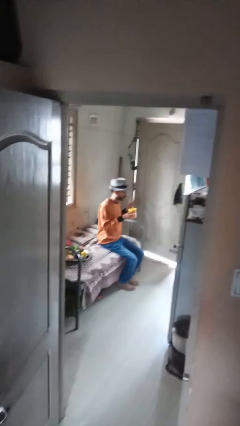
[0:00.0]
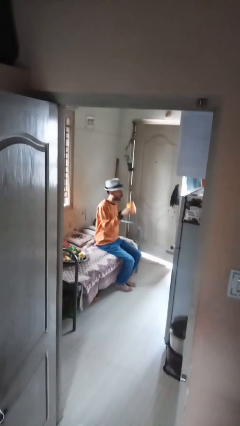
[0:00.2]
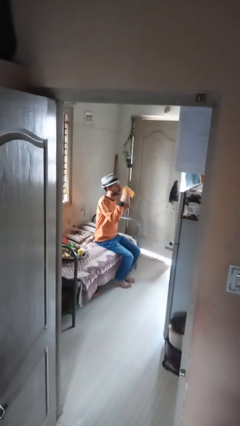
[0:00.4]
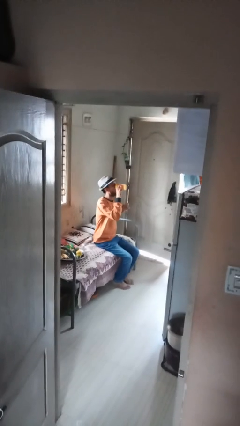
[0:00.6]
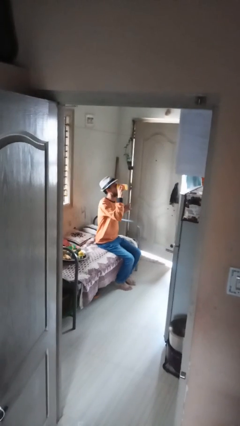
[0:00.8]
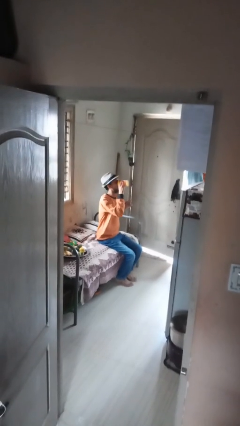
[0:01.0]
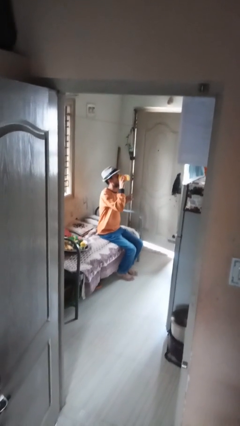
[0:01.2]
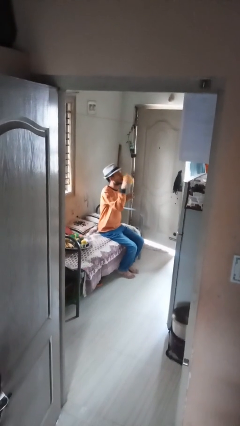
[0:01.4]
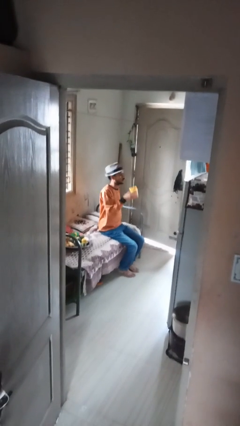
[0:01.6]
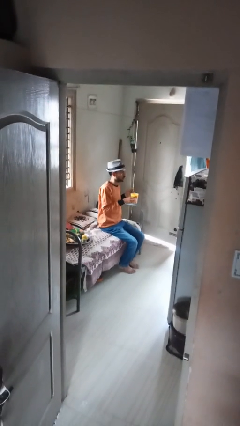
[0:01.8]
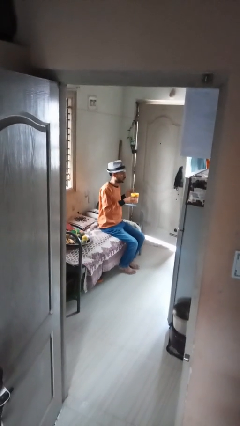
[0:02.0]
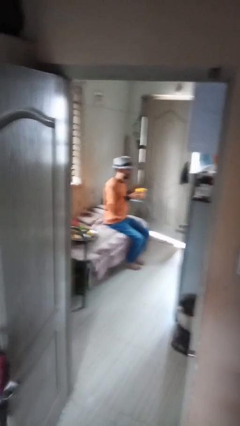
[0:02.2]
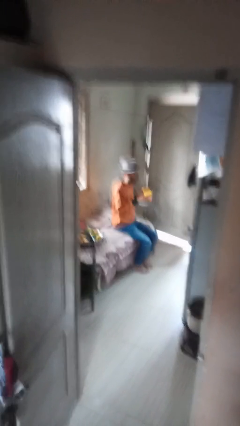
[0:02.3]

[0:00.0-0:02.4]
person drinks from mug

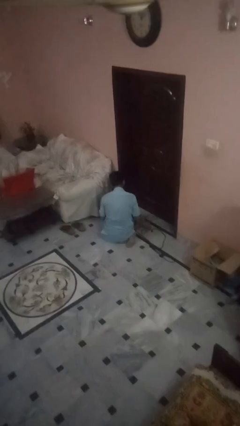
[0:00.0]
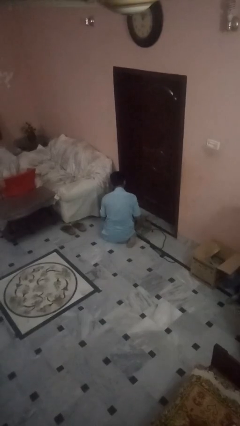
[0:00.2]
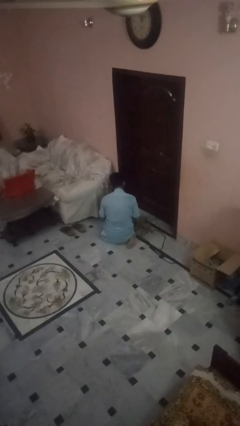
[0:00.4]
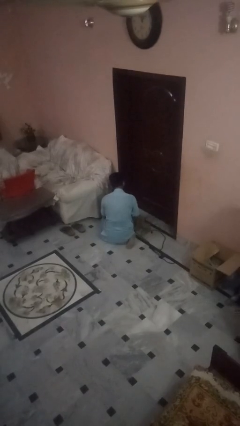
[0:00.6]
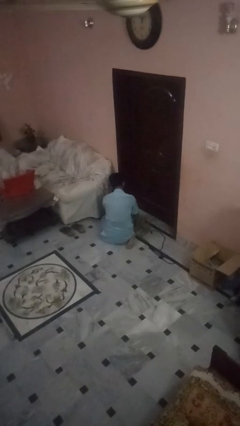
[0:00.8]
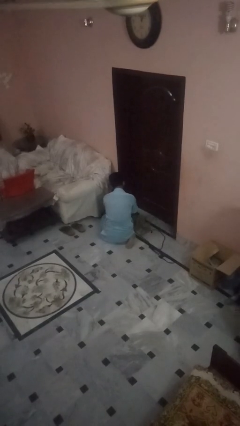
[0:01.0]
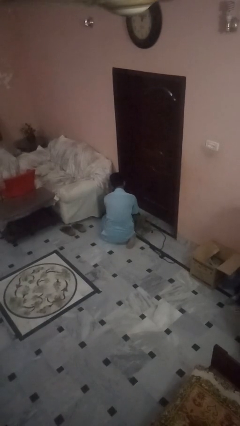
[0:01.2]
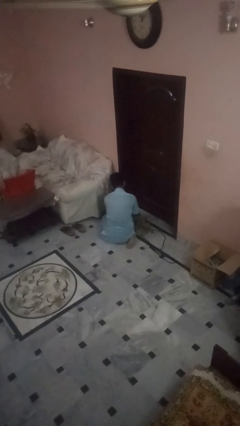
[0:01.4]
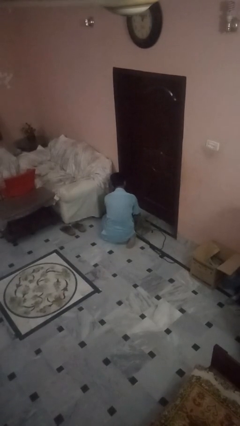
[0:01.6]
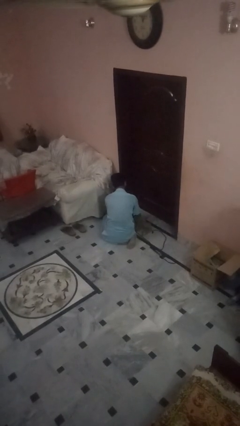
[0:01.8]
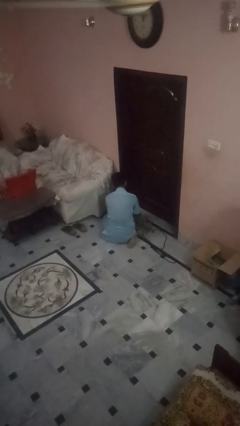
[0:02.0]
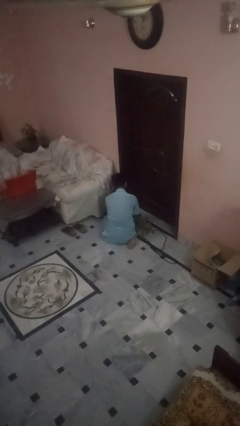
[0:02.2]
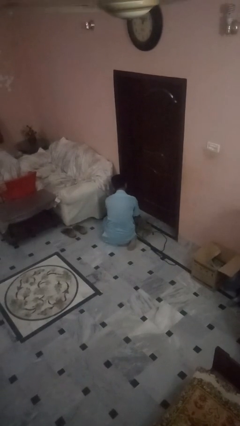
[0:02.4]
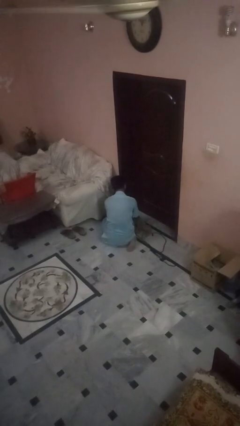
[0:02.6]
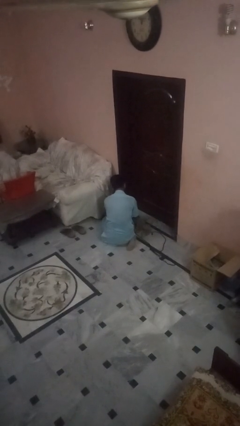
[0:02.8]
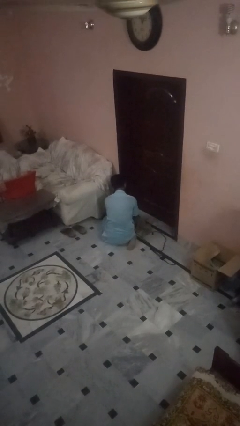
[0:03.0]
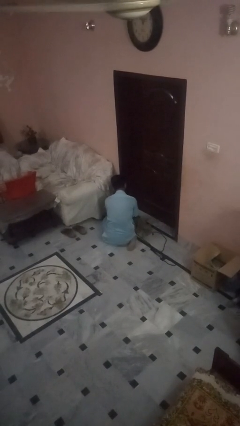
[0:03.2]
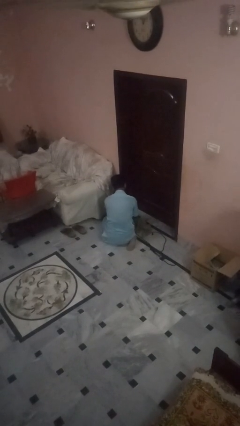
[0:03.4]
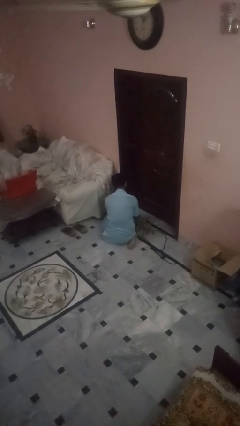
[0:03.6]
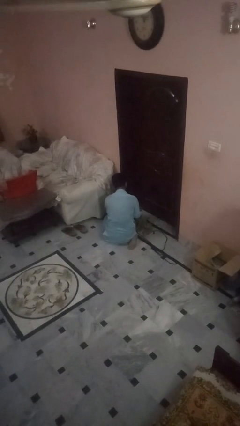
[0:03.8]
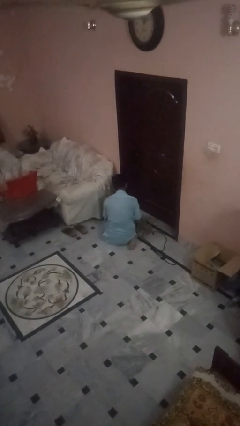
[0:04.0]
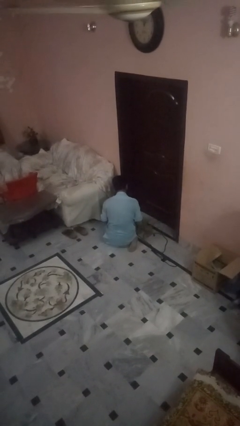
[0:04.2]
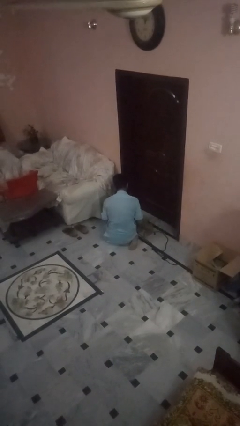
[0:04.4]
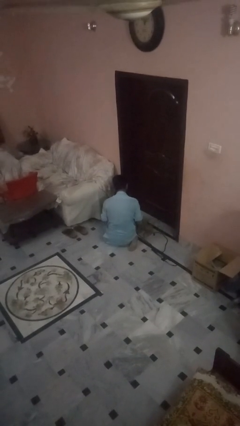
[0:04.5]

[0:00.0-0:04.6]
person unattaches leash from dog

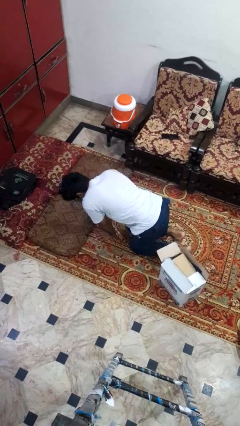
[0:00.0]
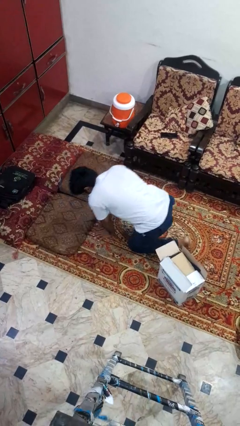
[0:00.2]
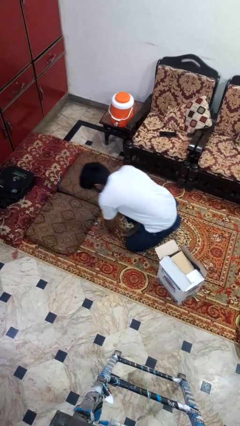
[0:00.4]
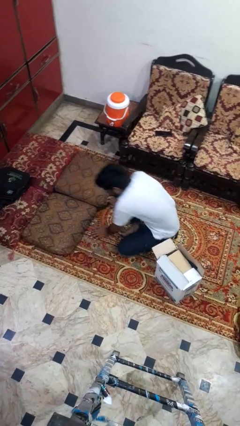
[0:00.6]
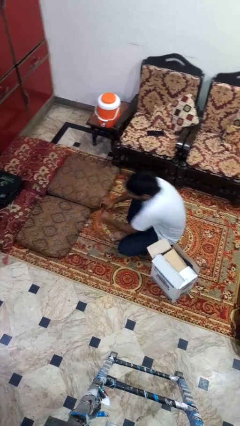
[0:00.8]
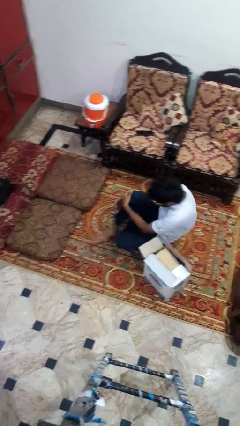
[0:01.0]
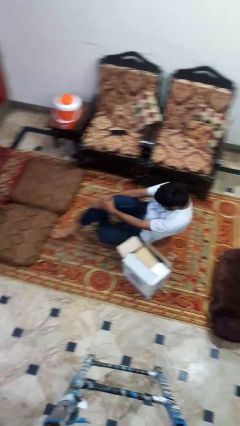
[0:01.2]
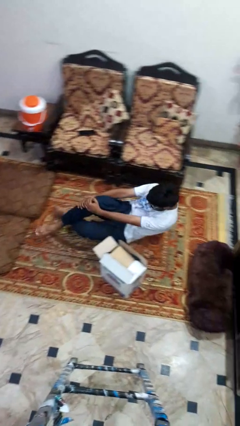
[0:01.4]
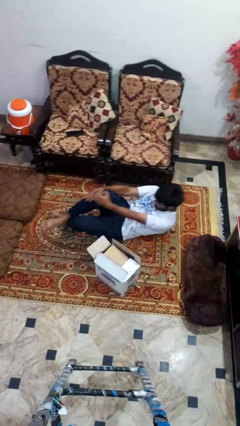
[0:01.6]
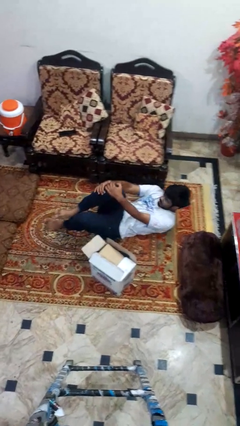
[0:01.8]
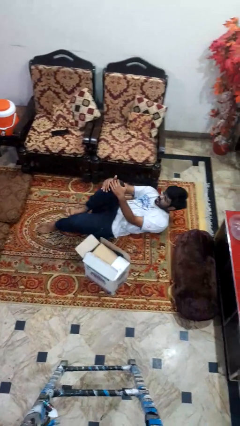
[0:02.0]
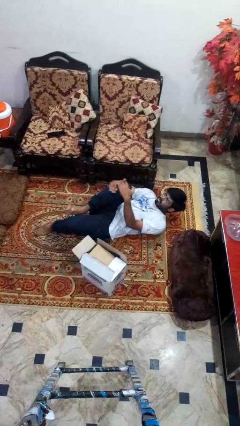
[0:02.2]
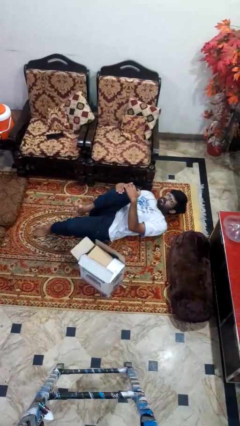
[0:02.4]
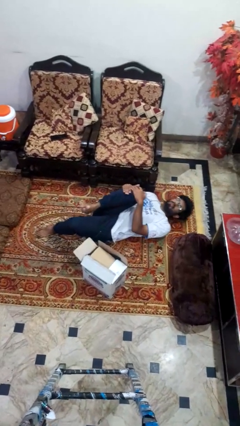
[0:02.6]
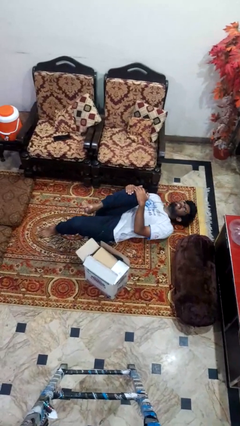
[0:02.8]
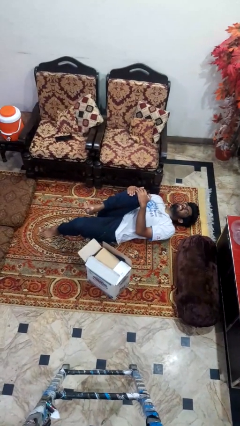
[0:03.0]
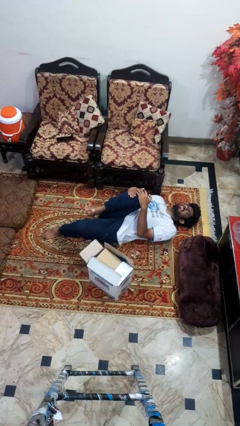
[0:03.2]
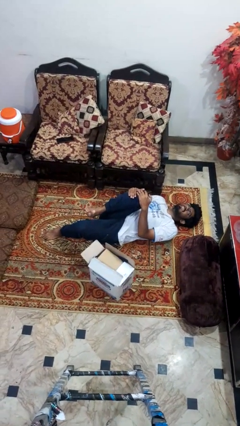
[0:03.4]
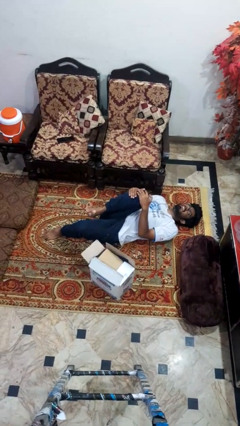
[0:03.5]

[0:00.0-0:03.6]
person lies down on floor

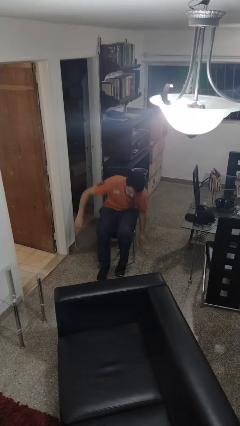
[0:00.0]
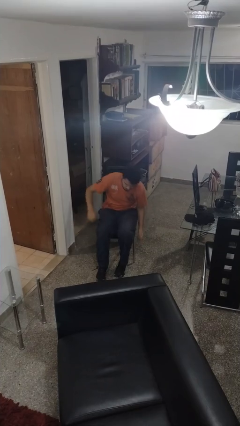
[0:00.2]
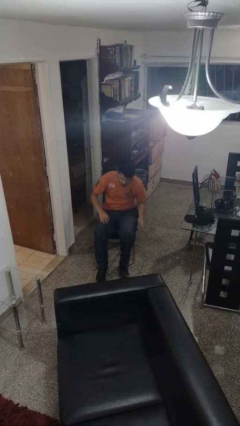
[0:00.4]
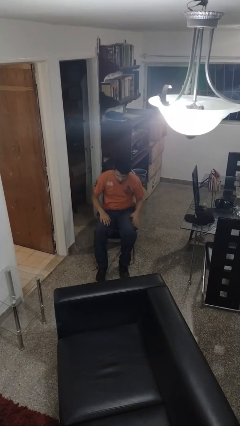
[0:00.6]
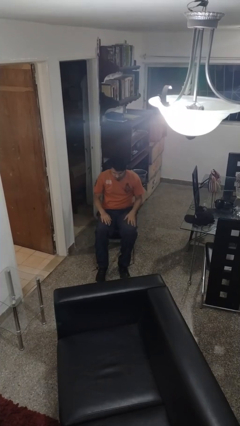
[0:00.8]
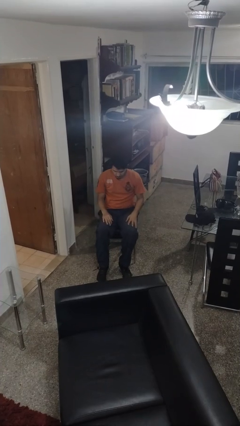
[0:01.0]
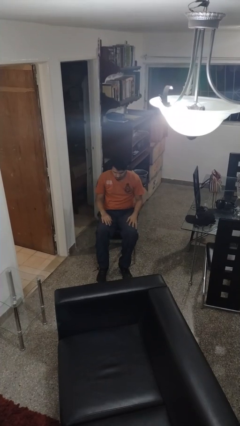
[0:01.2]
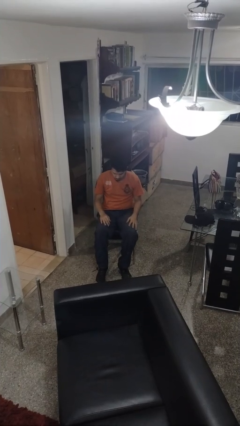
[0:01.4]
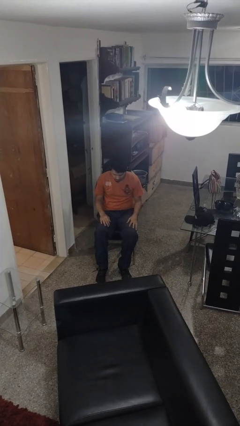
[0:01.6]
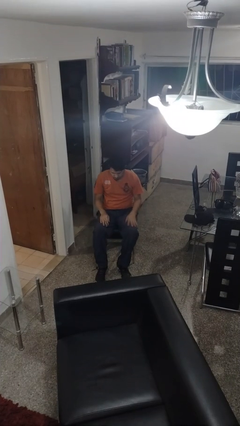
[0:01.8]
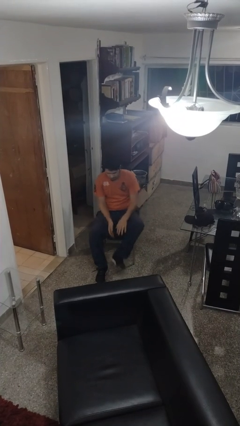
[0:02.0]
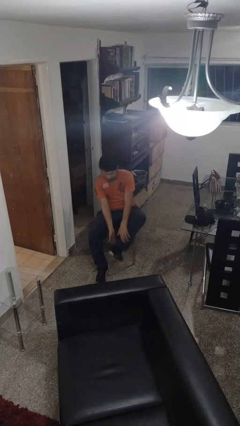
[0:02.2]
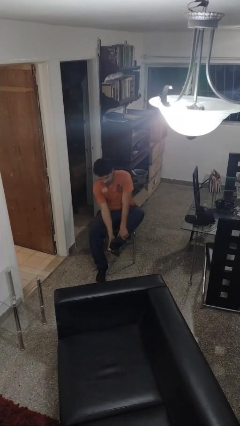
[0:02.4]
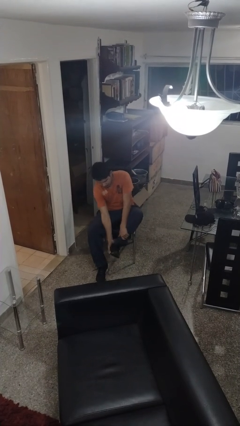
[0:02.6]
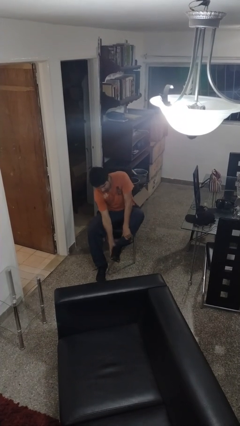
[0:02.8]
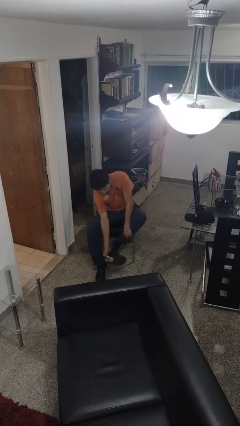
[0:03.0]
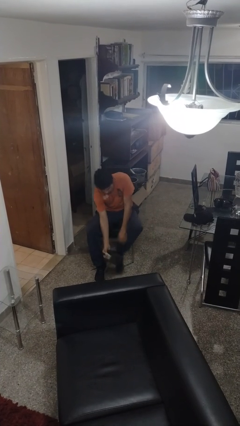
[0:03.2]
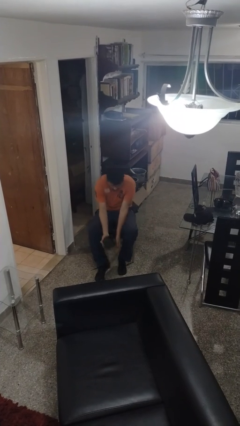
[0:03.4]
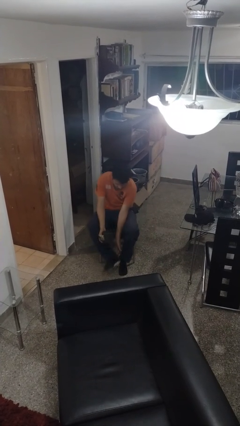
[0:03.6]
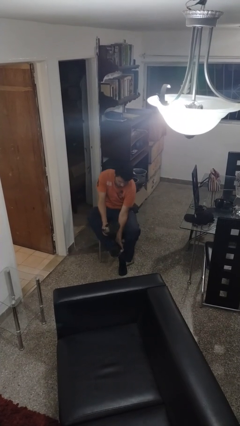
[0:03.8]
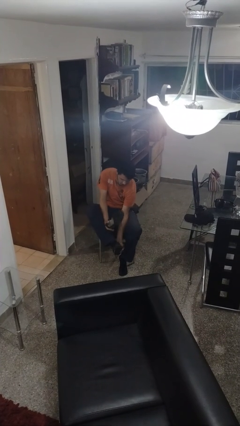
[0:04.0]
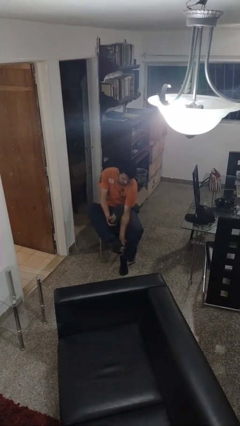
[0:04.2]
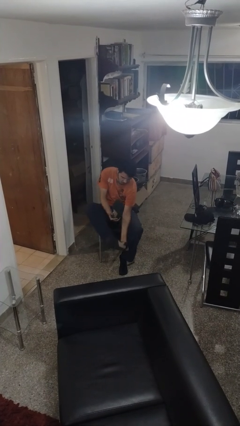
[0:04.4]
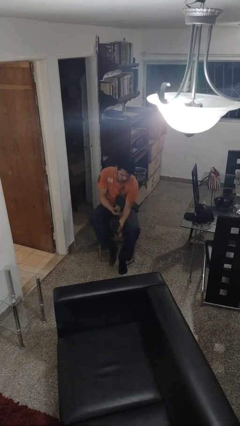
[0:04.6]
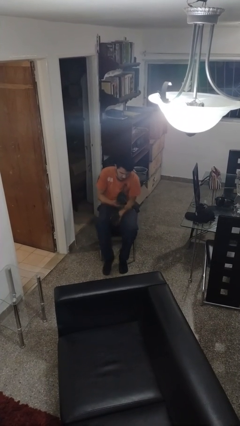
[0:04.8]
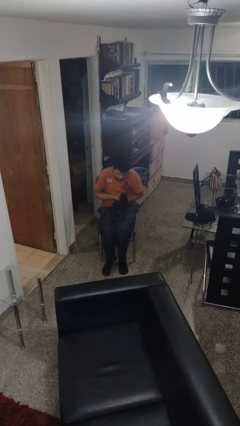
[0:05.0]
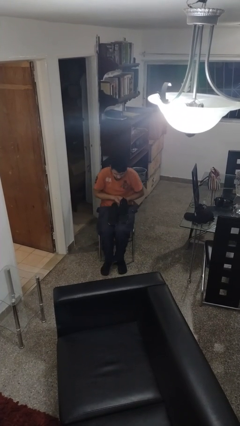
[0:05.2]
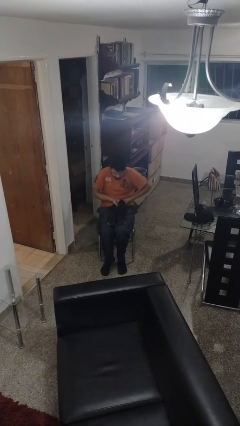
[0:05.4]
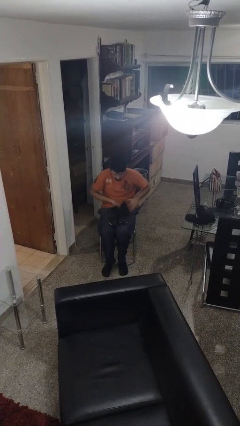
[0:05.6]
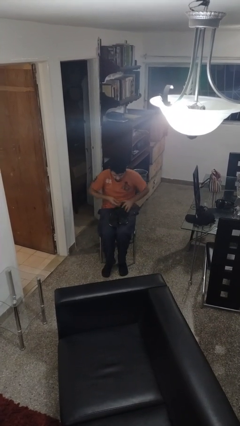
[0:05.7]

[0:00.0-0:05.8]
person takes off shoes

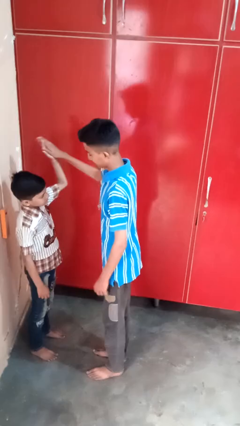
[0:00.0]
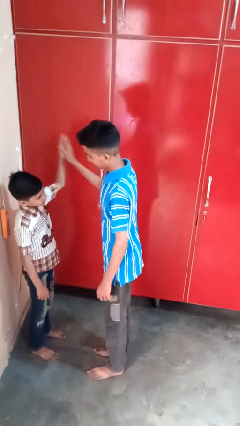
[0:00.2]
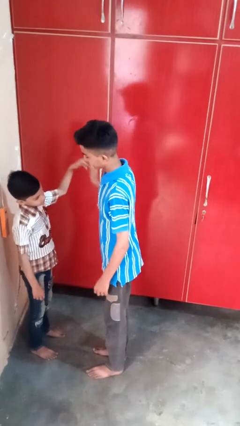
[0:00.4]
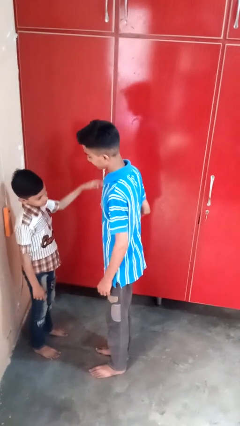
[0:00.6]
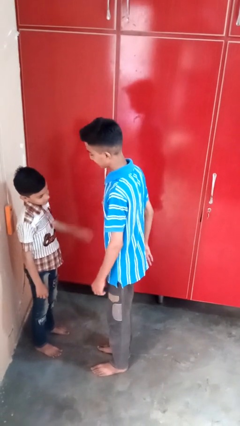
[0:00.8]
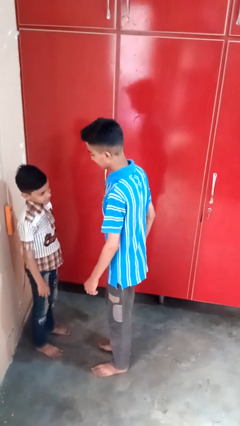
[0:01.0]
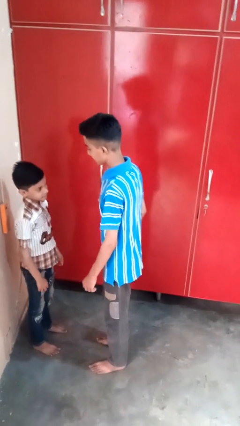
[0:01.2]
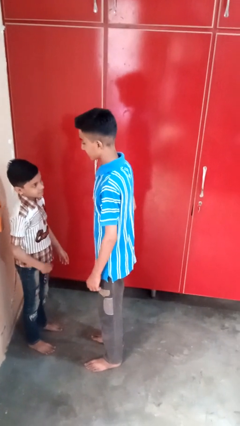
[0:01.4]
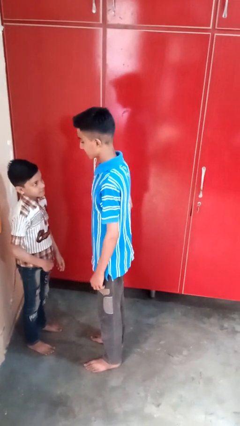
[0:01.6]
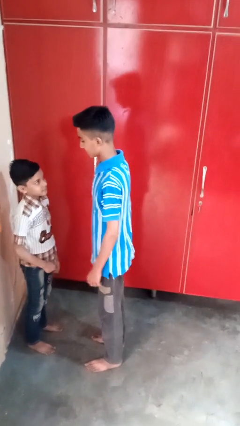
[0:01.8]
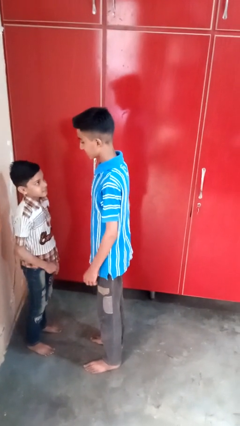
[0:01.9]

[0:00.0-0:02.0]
person highfives hand
